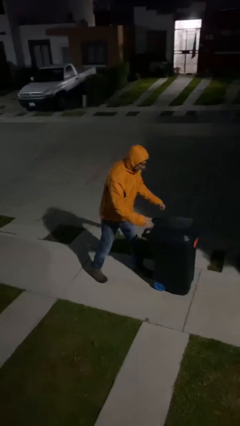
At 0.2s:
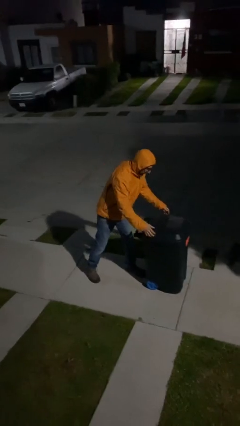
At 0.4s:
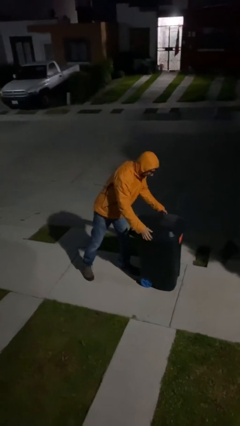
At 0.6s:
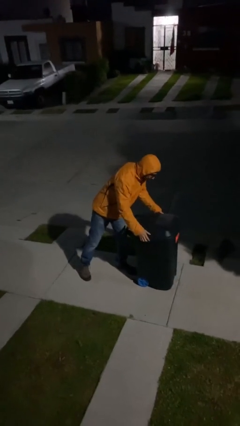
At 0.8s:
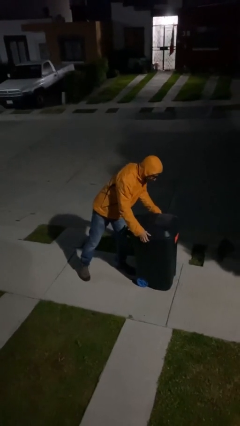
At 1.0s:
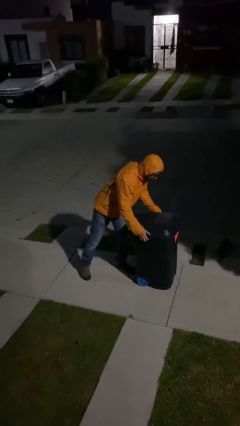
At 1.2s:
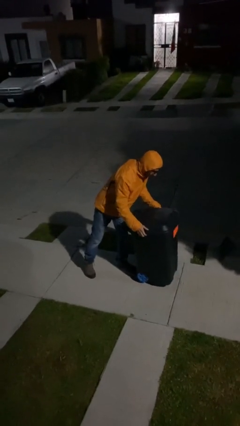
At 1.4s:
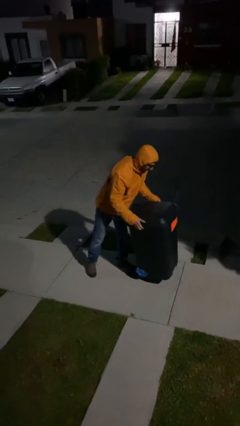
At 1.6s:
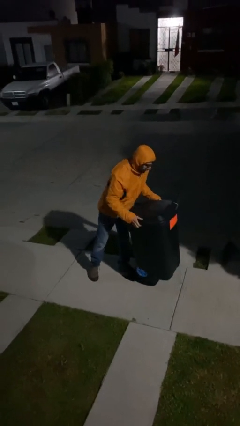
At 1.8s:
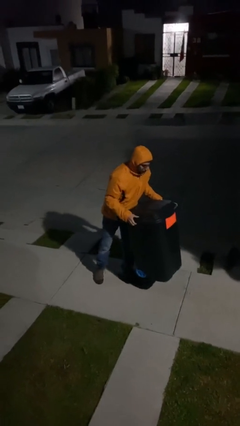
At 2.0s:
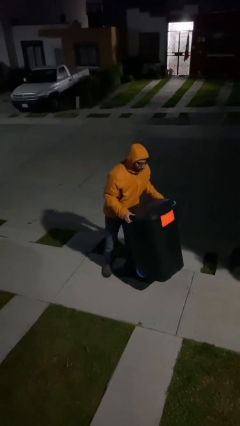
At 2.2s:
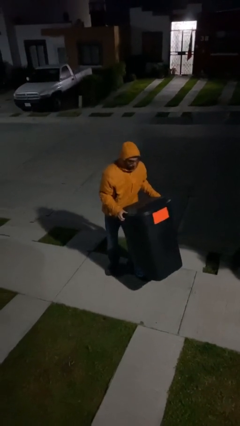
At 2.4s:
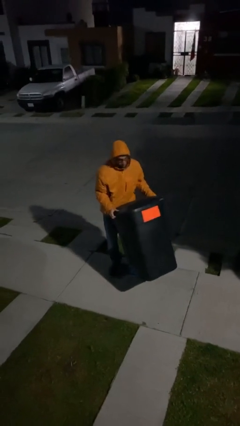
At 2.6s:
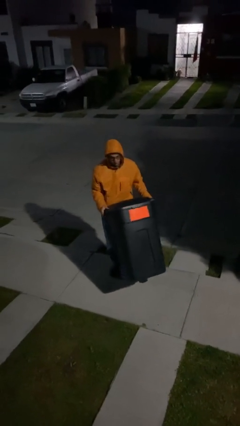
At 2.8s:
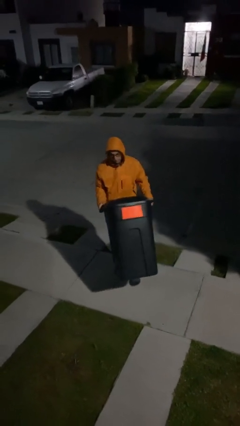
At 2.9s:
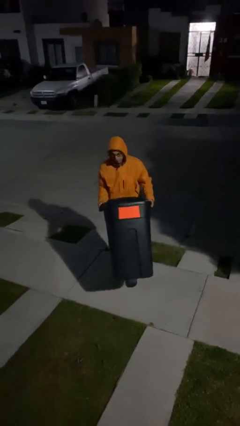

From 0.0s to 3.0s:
person picks up object from floor

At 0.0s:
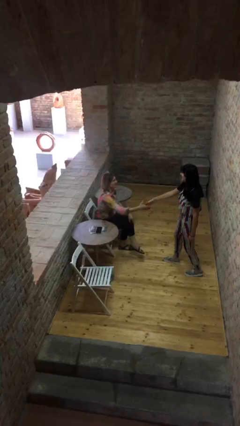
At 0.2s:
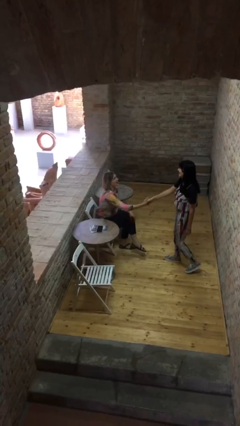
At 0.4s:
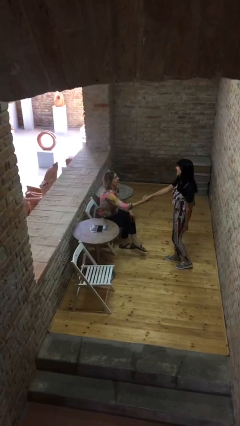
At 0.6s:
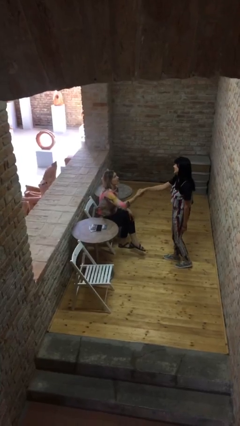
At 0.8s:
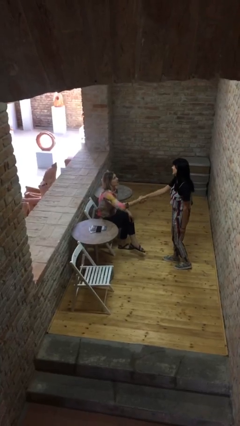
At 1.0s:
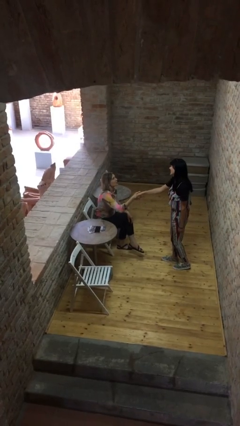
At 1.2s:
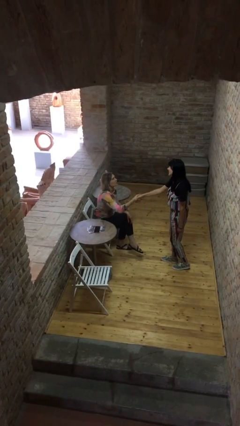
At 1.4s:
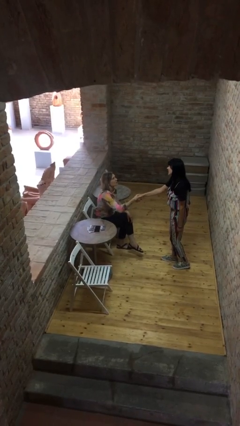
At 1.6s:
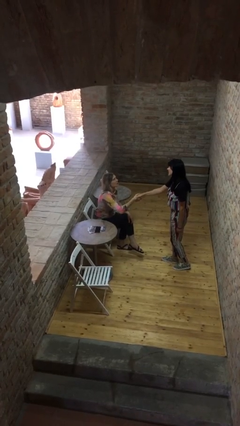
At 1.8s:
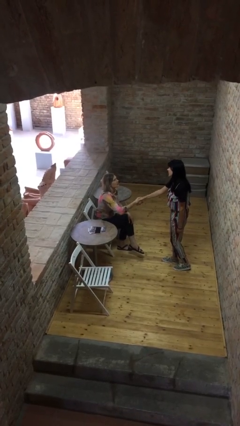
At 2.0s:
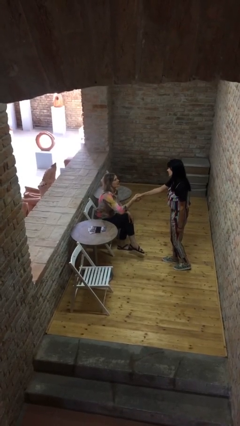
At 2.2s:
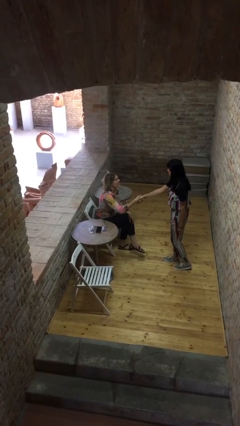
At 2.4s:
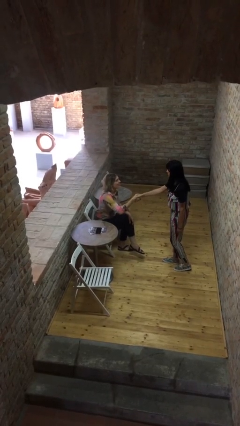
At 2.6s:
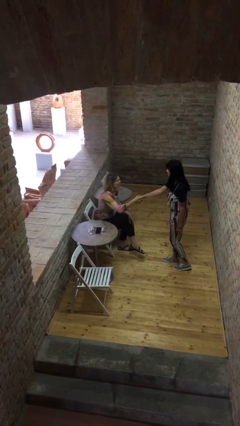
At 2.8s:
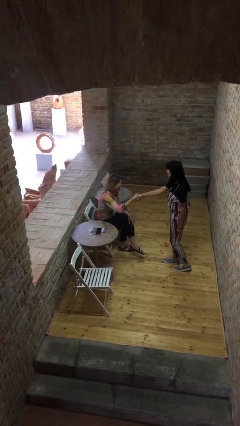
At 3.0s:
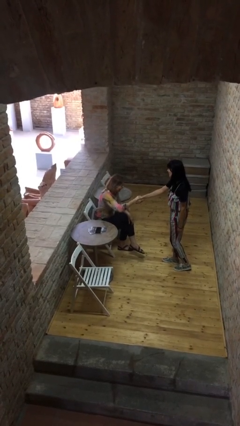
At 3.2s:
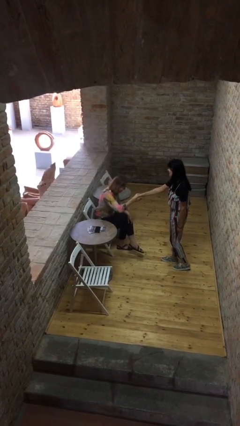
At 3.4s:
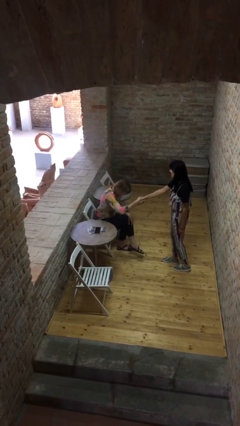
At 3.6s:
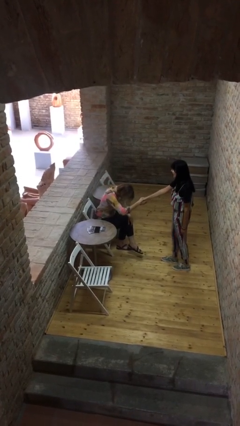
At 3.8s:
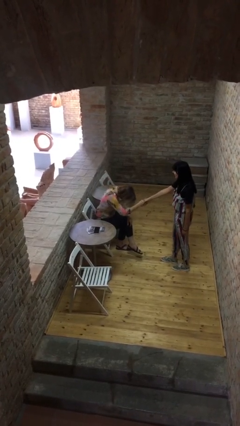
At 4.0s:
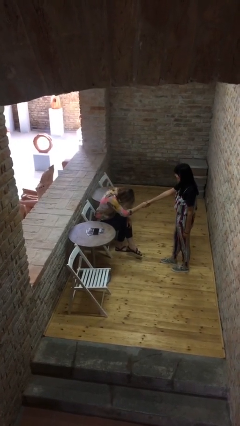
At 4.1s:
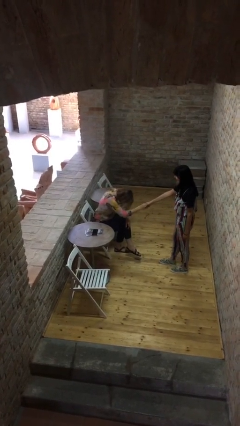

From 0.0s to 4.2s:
person shakes hand

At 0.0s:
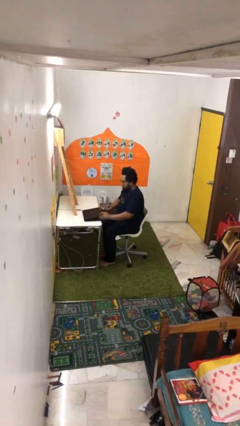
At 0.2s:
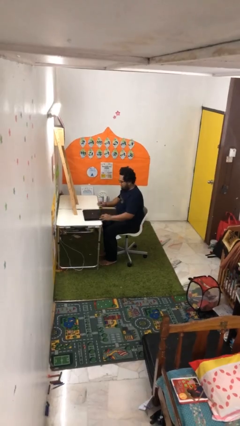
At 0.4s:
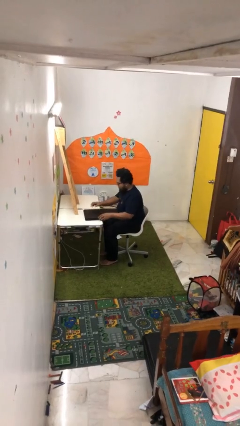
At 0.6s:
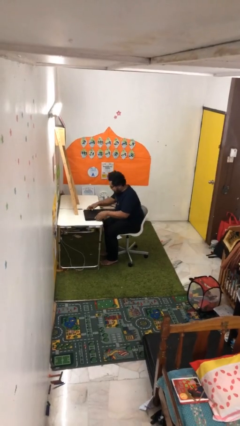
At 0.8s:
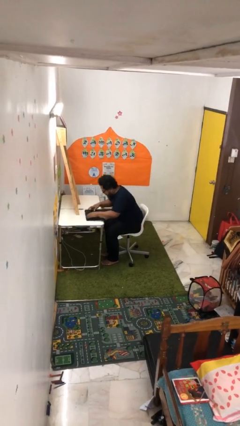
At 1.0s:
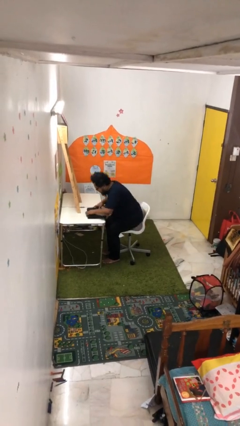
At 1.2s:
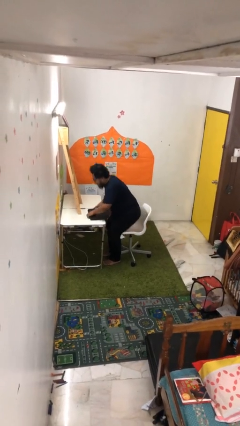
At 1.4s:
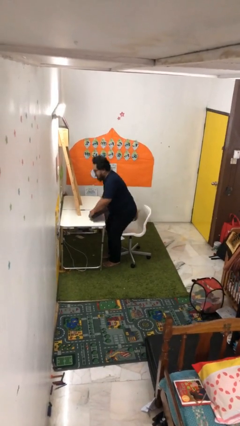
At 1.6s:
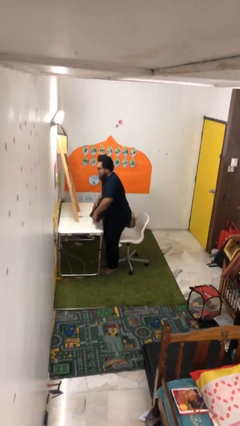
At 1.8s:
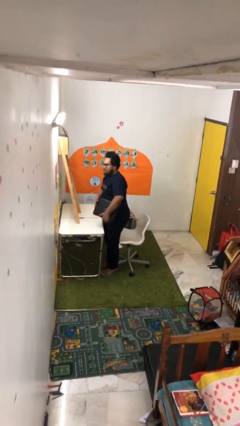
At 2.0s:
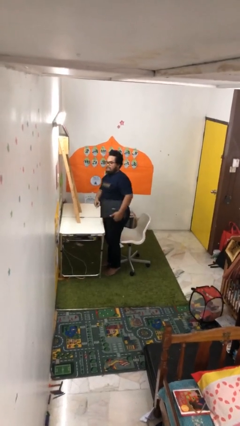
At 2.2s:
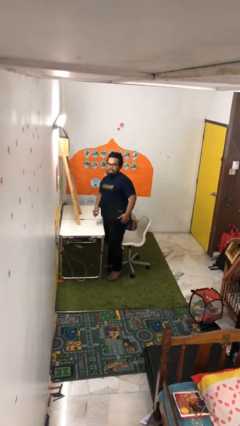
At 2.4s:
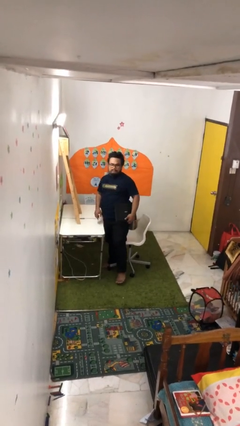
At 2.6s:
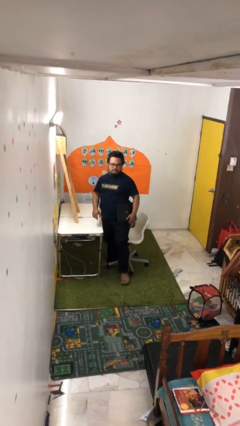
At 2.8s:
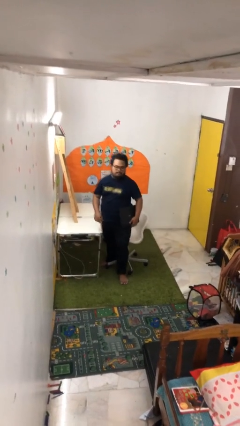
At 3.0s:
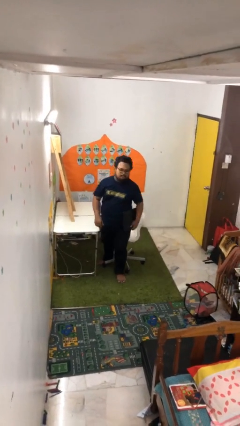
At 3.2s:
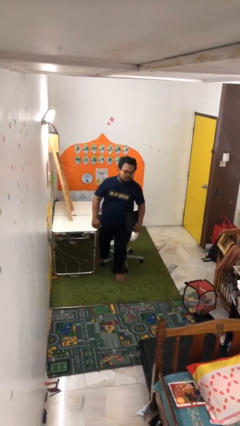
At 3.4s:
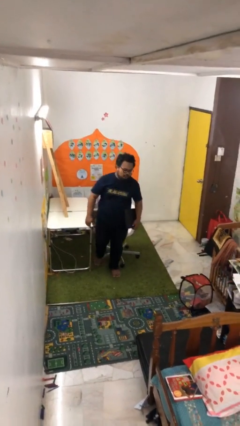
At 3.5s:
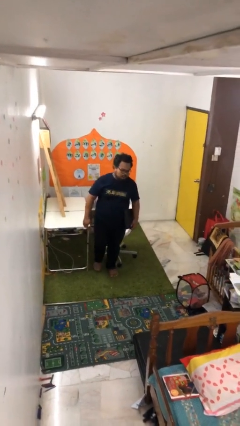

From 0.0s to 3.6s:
person stands up

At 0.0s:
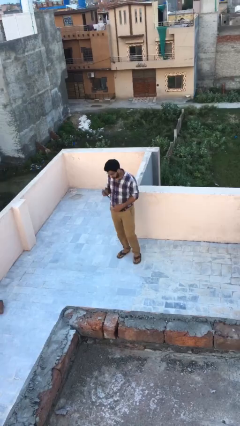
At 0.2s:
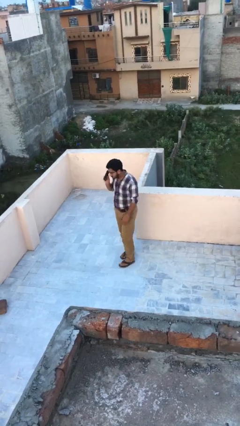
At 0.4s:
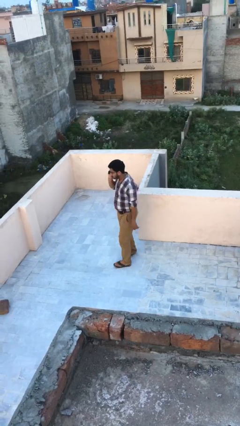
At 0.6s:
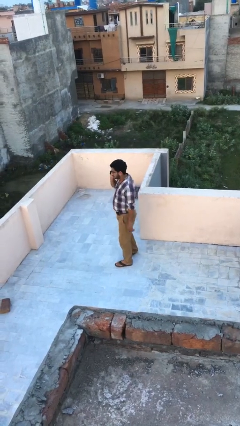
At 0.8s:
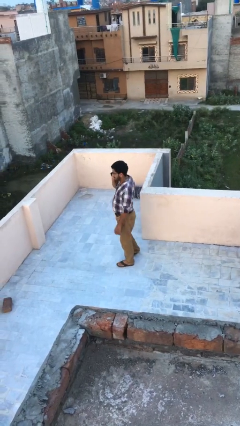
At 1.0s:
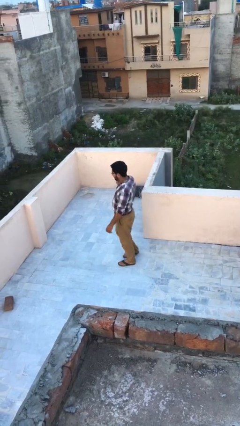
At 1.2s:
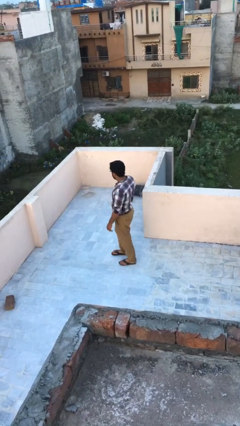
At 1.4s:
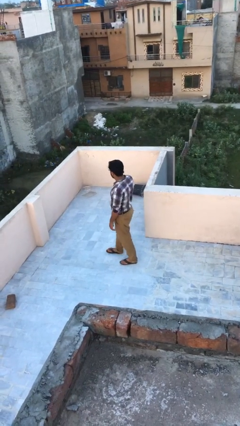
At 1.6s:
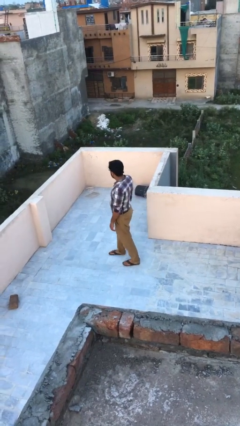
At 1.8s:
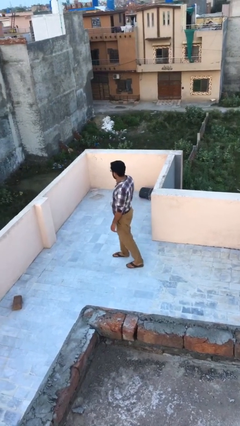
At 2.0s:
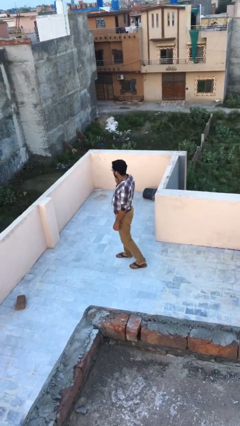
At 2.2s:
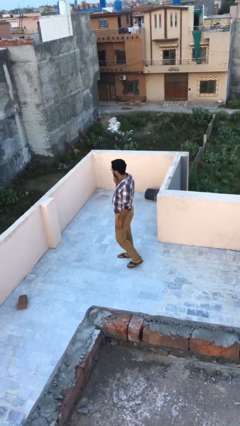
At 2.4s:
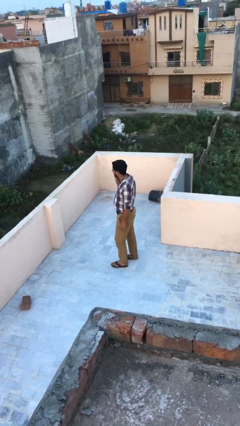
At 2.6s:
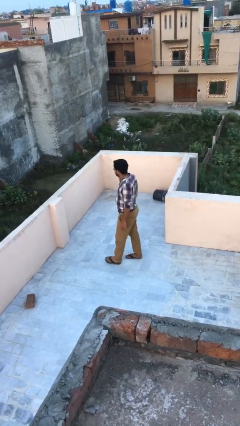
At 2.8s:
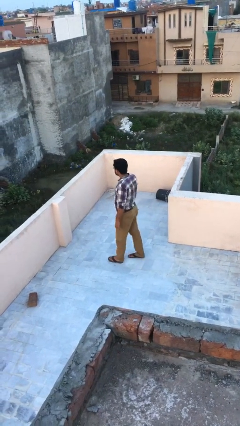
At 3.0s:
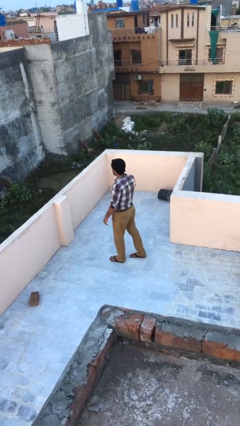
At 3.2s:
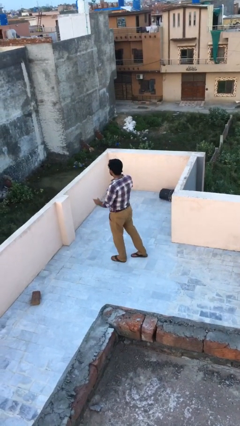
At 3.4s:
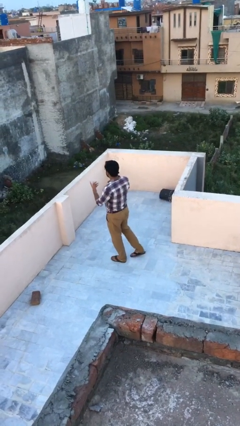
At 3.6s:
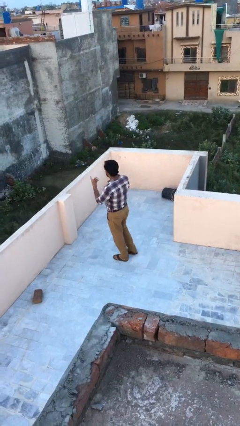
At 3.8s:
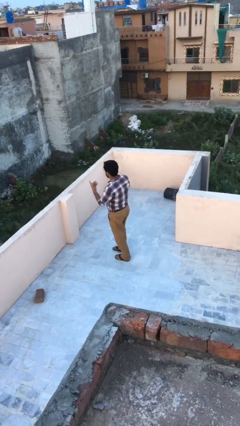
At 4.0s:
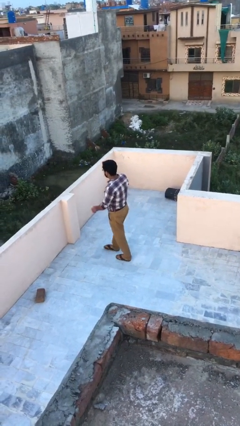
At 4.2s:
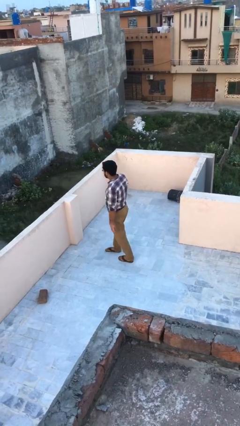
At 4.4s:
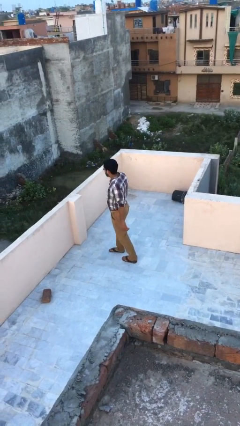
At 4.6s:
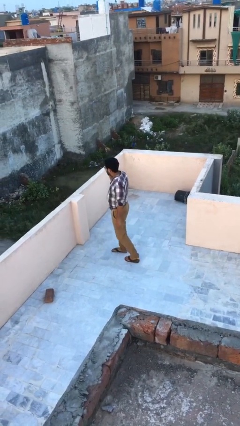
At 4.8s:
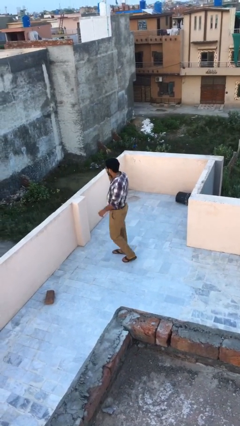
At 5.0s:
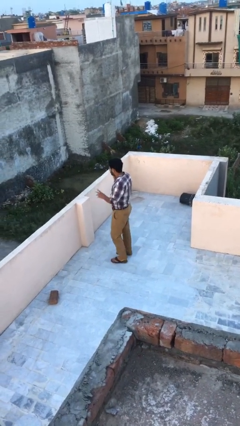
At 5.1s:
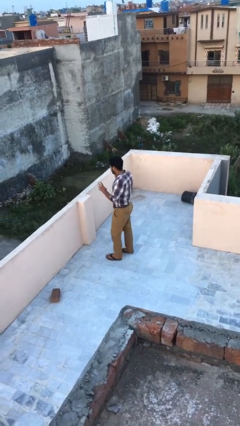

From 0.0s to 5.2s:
person talks on phone

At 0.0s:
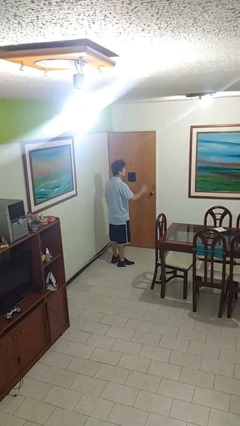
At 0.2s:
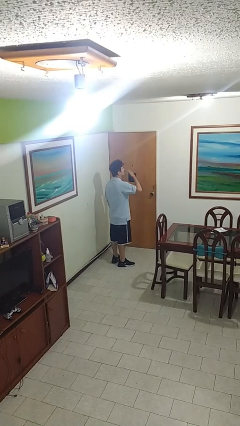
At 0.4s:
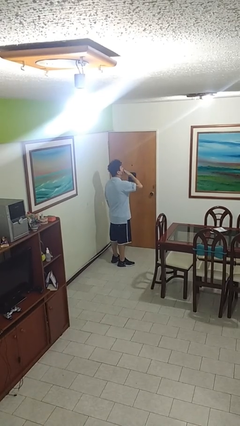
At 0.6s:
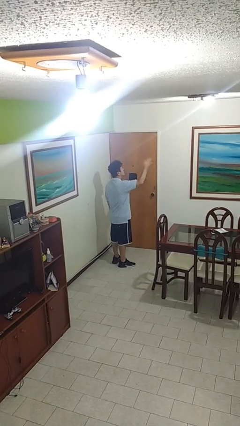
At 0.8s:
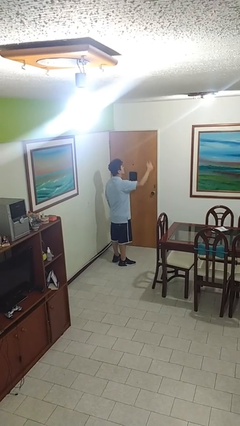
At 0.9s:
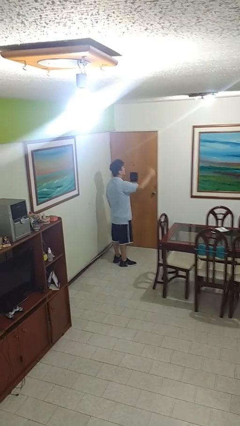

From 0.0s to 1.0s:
person gestures blow kiss

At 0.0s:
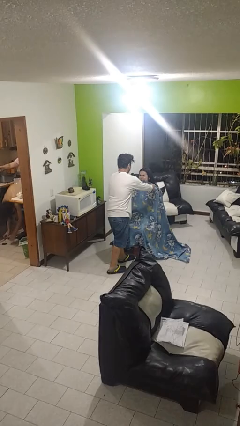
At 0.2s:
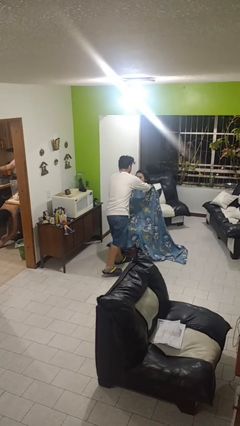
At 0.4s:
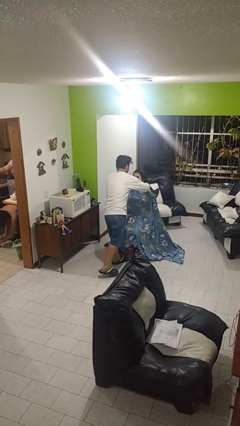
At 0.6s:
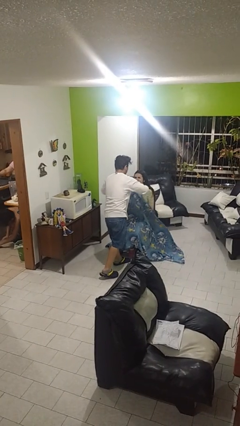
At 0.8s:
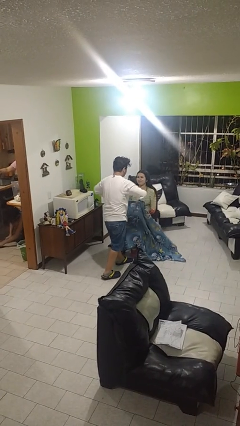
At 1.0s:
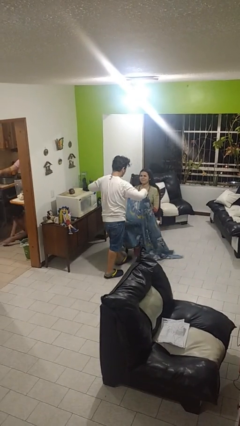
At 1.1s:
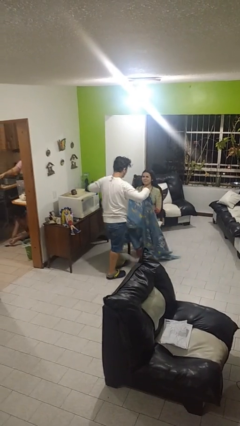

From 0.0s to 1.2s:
person uncovers friend with blanket
